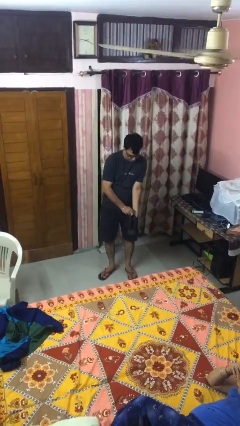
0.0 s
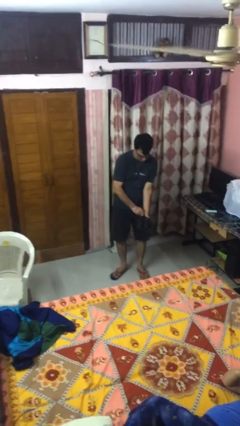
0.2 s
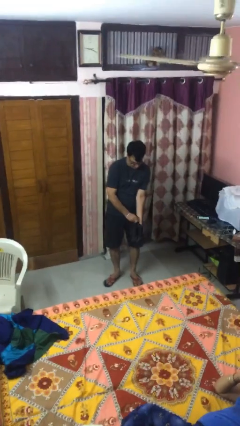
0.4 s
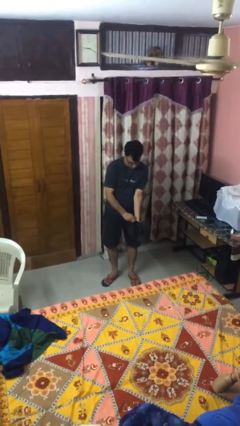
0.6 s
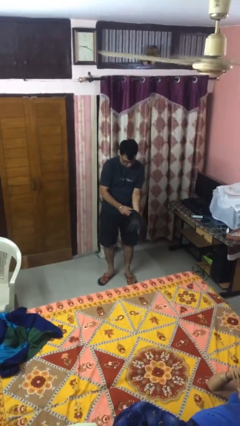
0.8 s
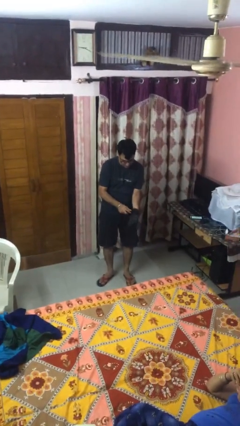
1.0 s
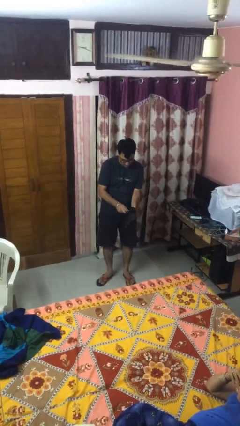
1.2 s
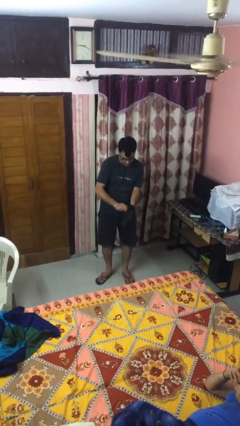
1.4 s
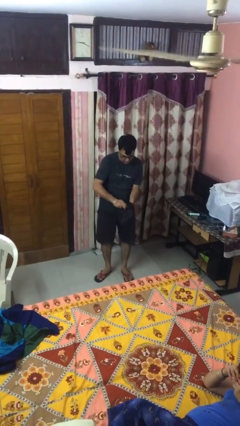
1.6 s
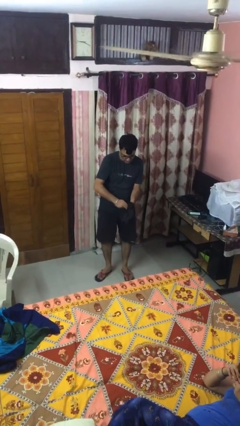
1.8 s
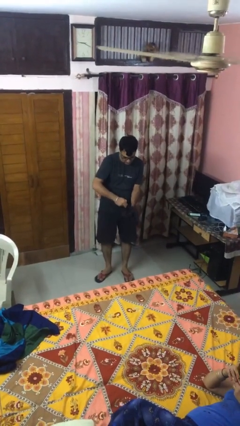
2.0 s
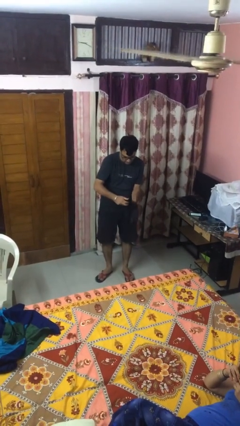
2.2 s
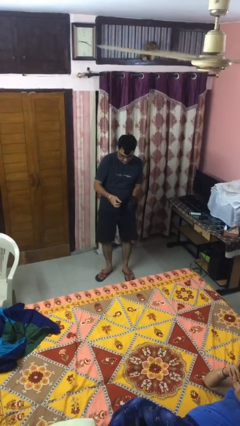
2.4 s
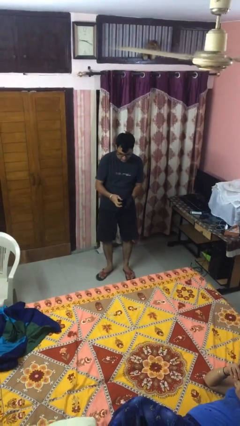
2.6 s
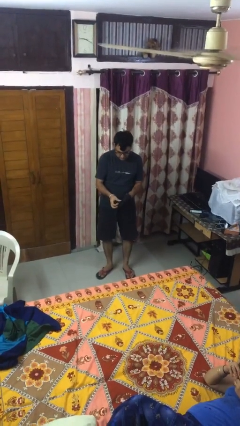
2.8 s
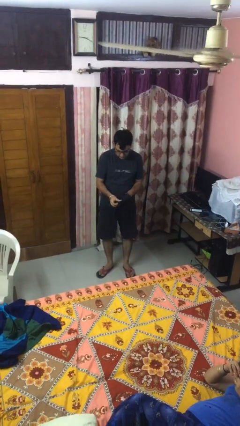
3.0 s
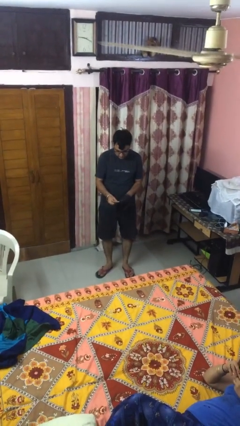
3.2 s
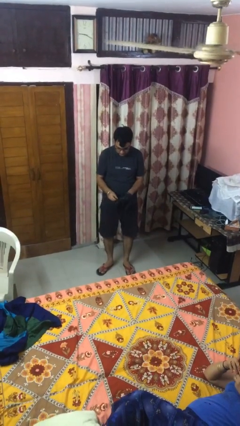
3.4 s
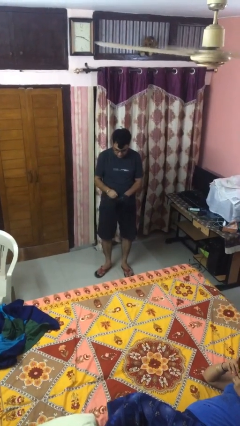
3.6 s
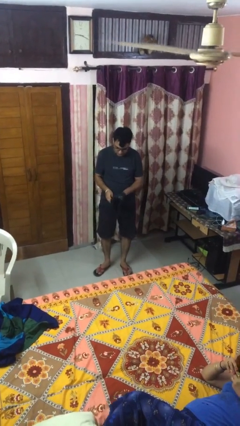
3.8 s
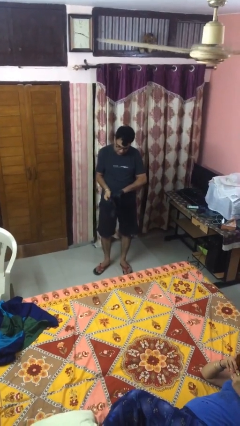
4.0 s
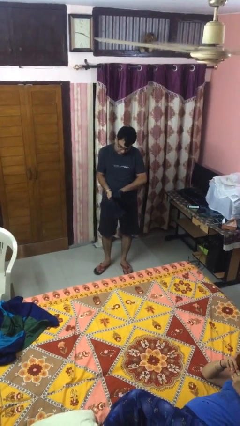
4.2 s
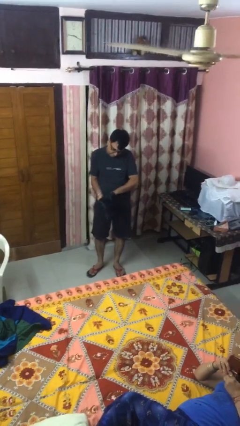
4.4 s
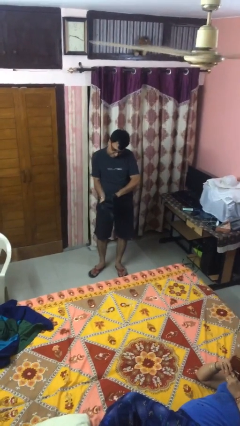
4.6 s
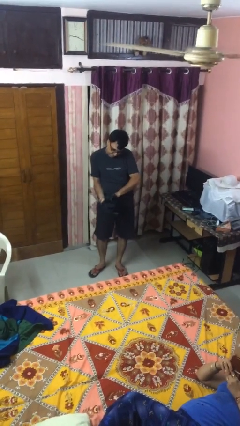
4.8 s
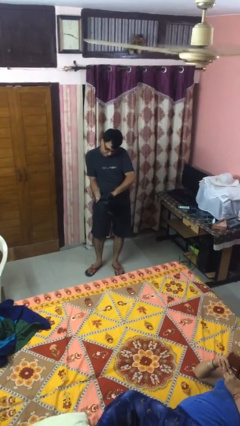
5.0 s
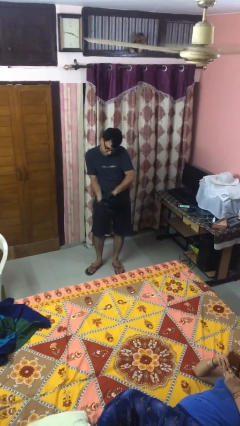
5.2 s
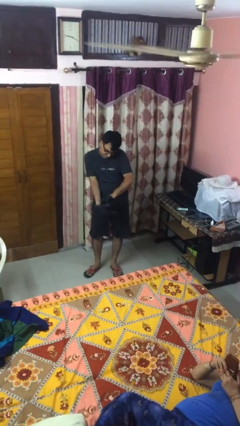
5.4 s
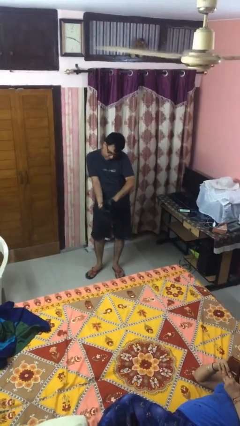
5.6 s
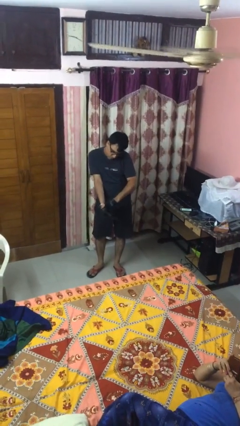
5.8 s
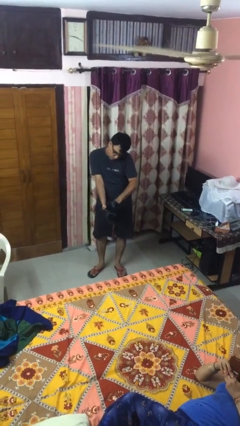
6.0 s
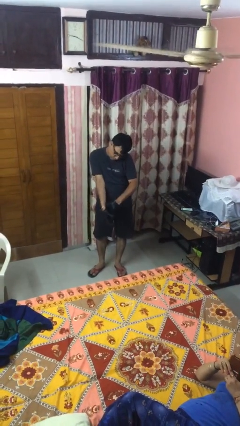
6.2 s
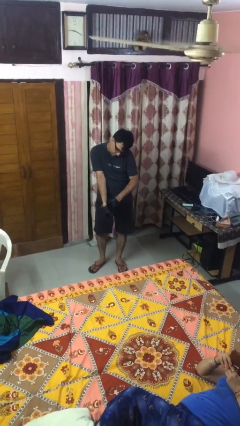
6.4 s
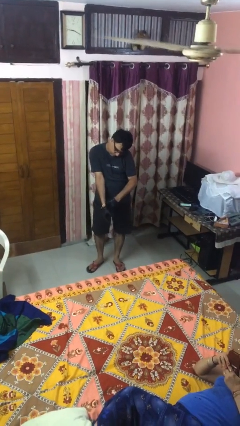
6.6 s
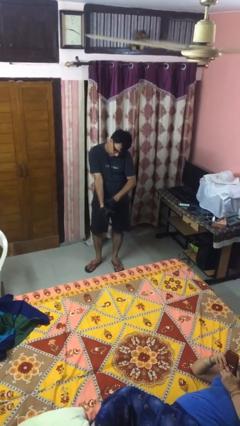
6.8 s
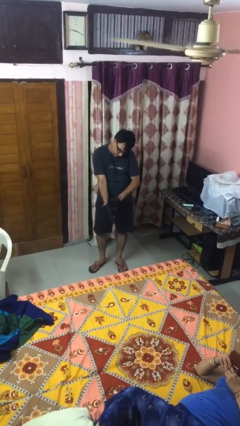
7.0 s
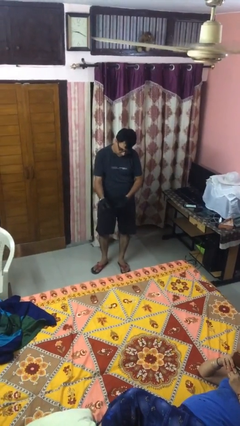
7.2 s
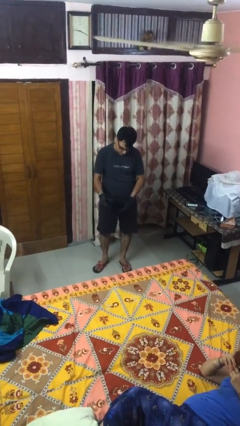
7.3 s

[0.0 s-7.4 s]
person puts on gloves

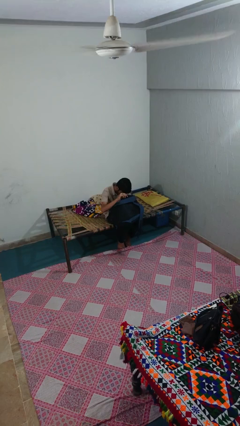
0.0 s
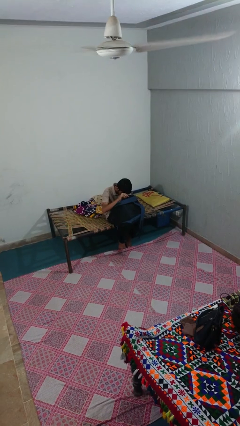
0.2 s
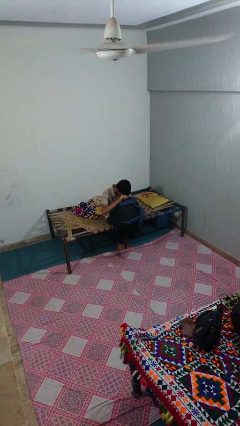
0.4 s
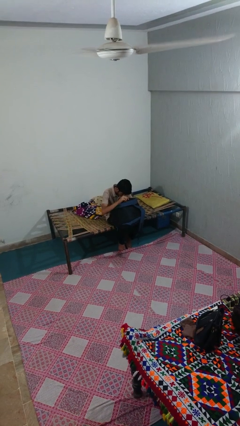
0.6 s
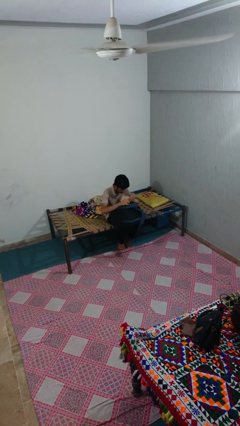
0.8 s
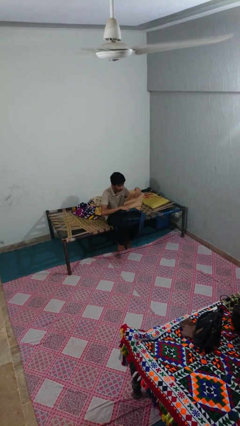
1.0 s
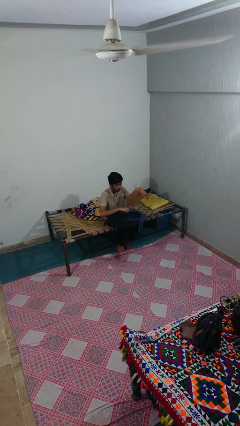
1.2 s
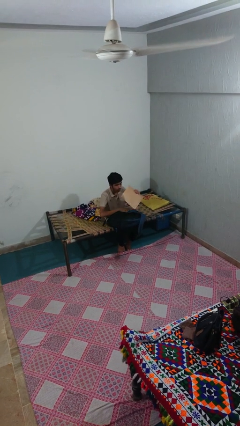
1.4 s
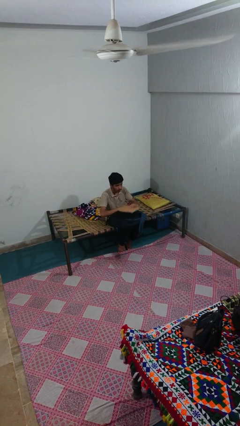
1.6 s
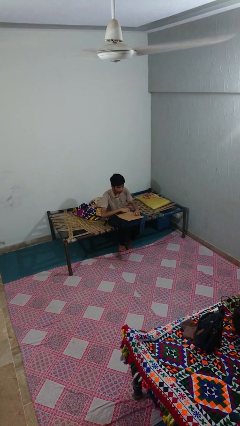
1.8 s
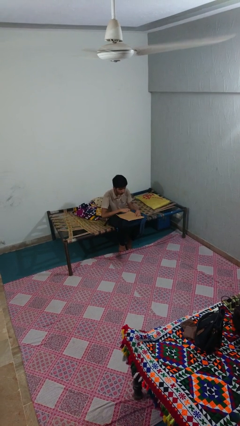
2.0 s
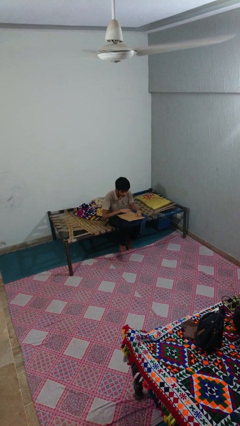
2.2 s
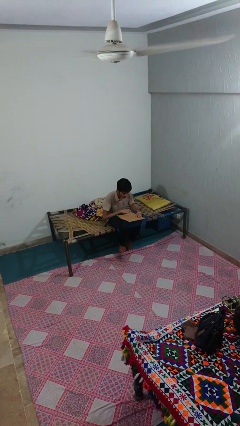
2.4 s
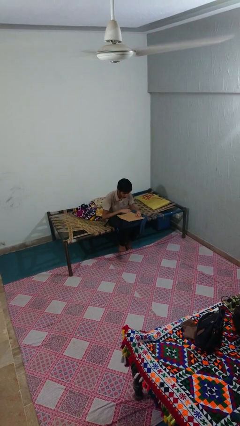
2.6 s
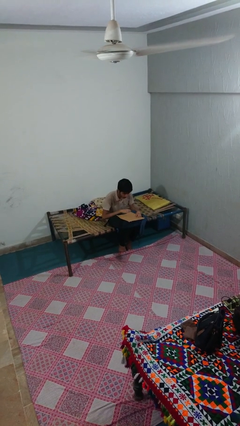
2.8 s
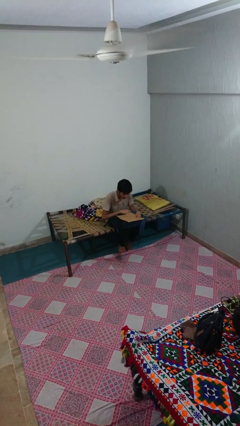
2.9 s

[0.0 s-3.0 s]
person takes object from backpack

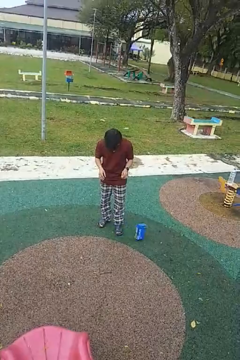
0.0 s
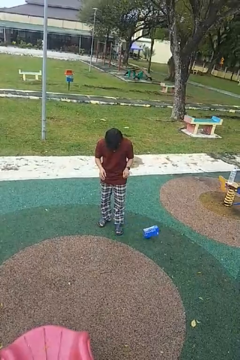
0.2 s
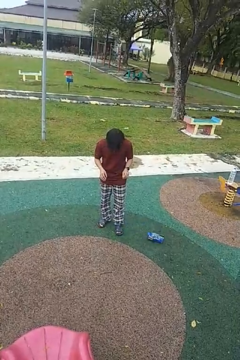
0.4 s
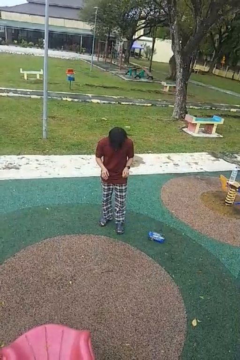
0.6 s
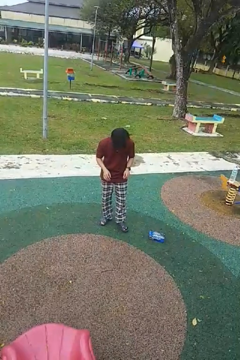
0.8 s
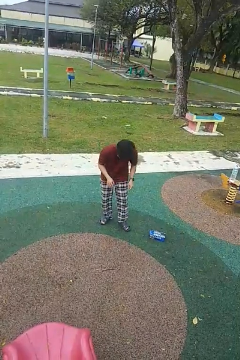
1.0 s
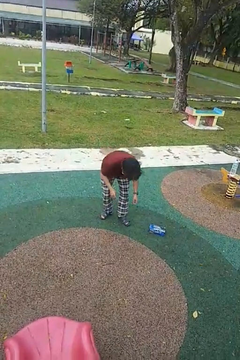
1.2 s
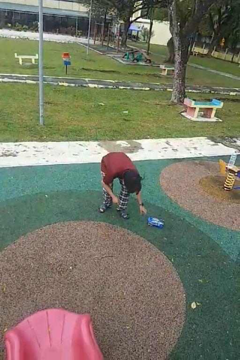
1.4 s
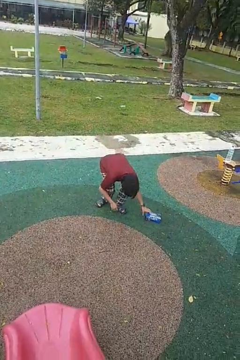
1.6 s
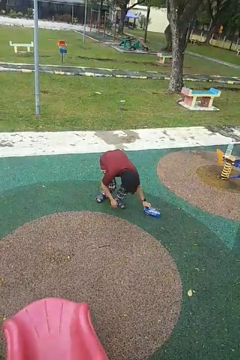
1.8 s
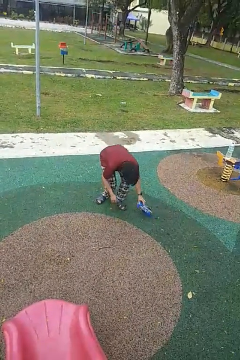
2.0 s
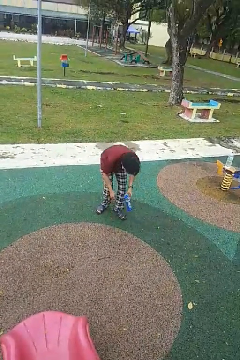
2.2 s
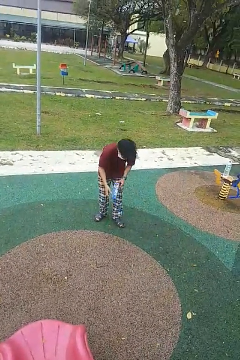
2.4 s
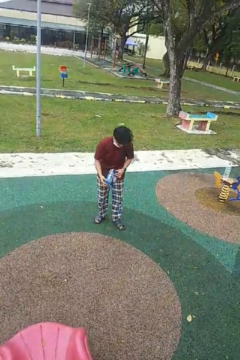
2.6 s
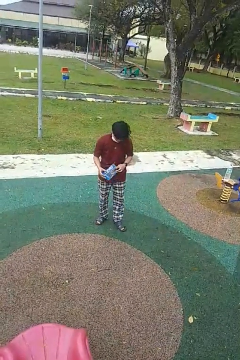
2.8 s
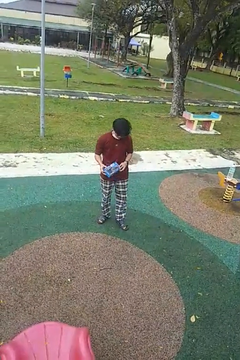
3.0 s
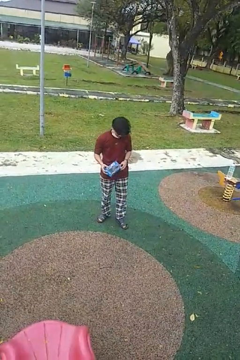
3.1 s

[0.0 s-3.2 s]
person picks up object from floor

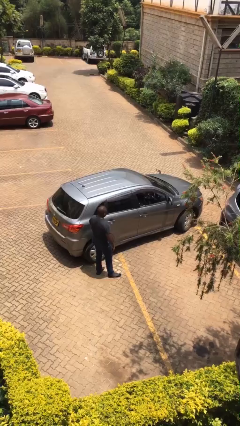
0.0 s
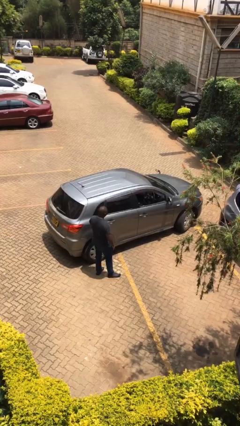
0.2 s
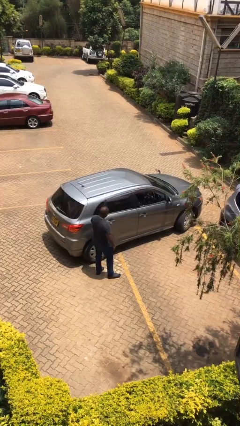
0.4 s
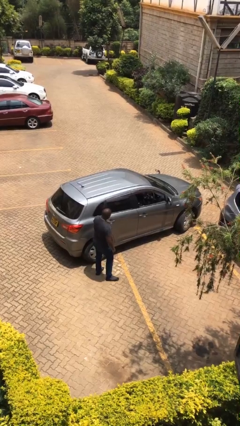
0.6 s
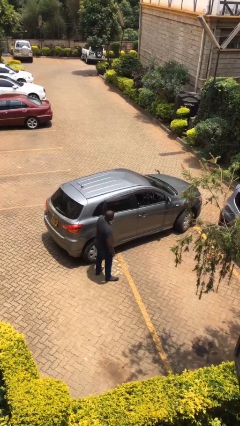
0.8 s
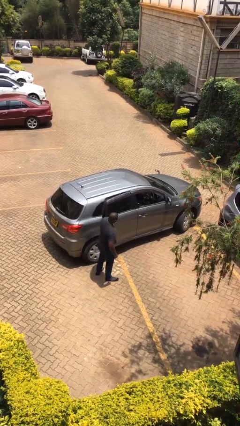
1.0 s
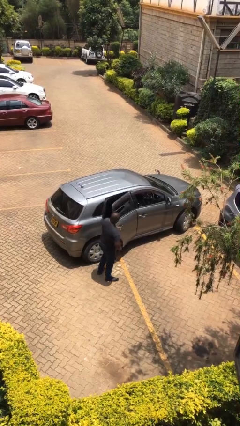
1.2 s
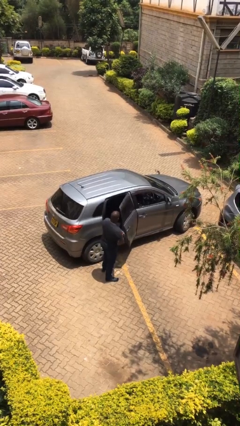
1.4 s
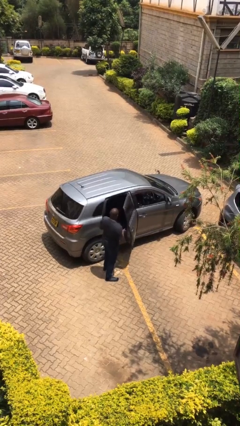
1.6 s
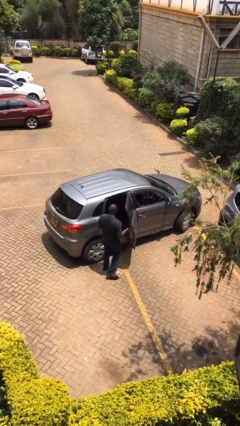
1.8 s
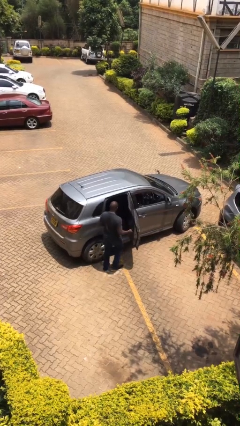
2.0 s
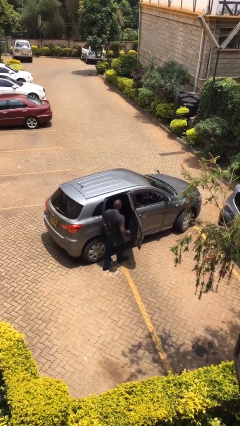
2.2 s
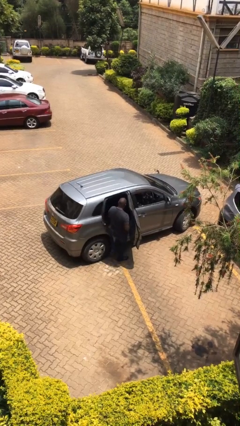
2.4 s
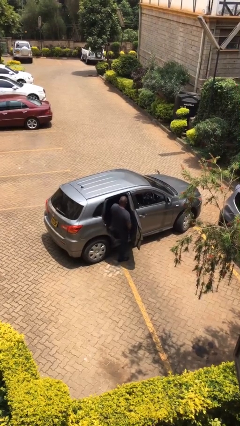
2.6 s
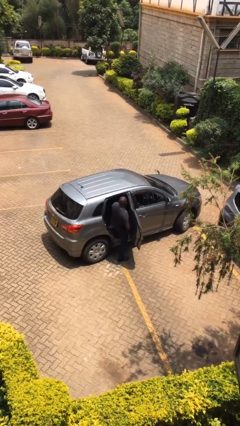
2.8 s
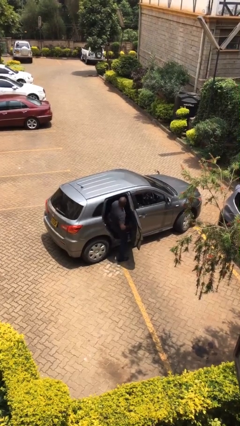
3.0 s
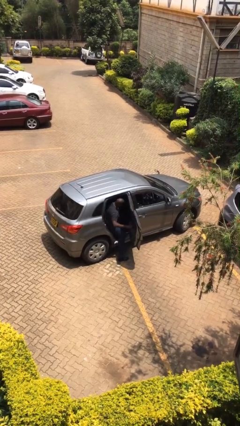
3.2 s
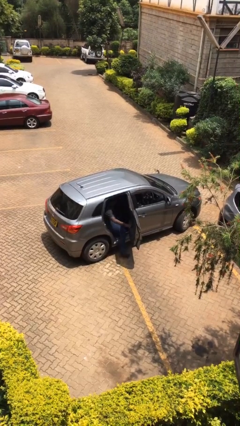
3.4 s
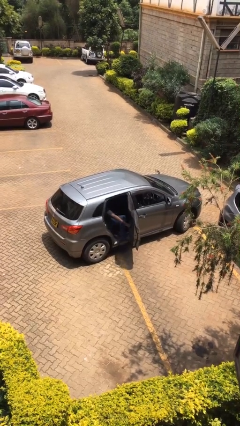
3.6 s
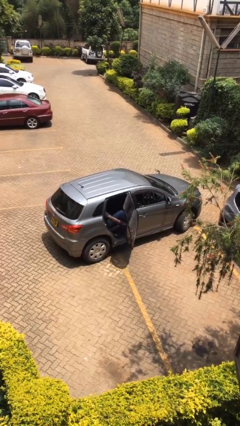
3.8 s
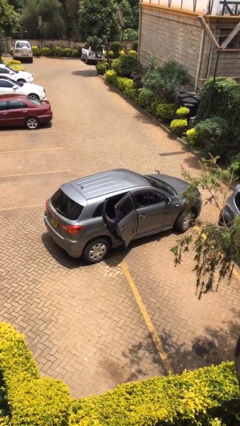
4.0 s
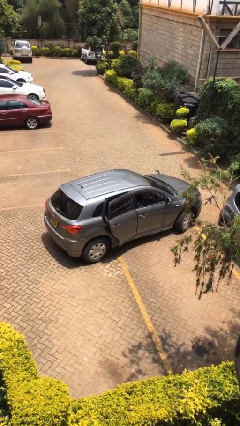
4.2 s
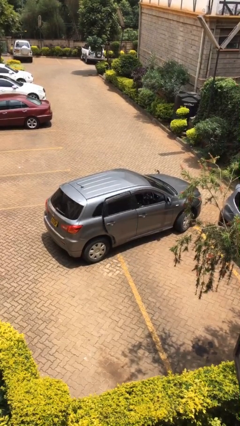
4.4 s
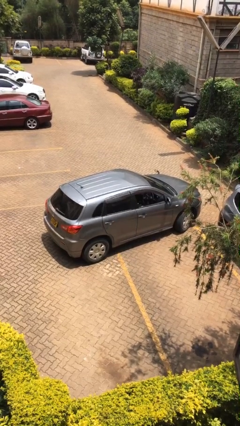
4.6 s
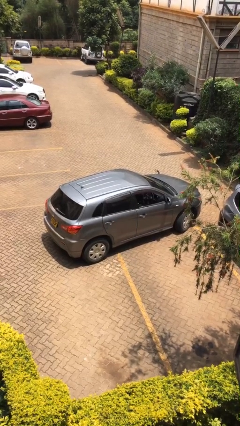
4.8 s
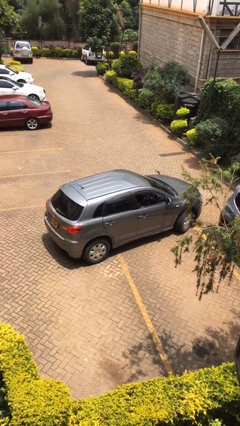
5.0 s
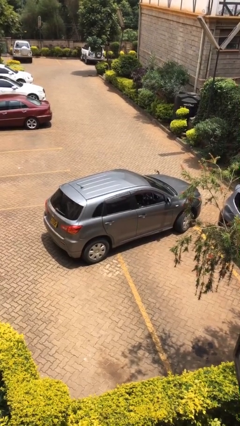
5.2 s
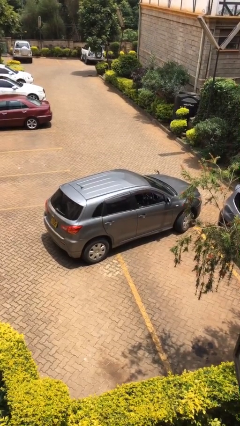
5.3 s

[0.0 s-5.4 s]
car picks up person
